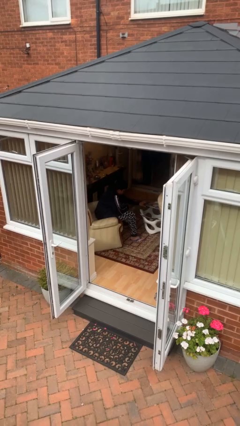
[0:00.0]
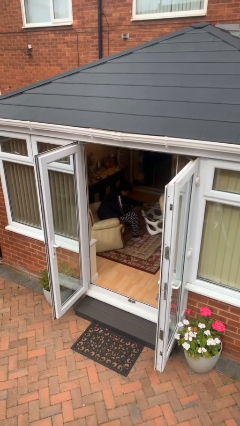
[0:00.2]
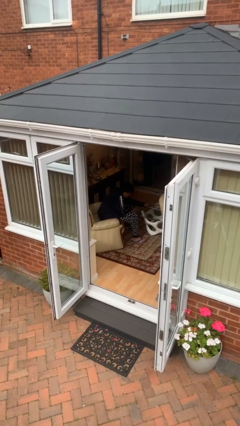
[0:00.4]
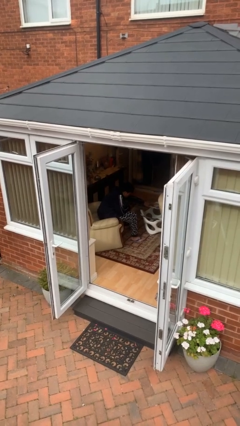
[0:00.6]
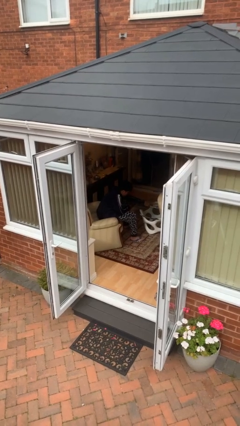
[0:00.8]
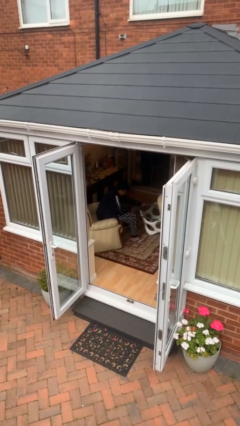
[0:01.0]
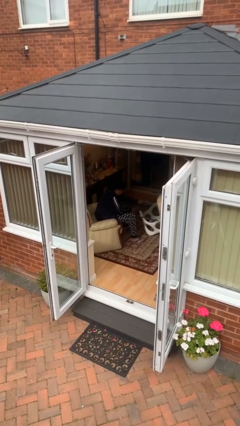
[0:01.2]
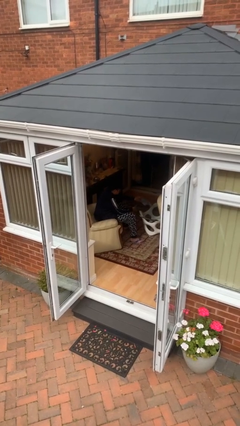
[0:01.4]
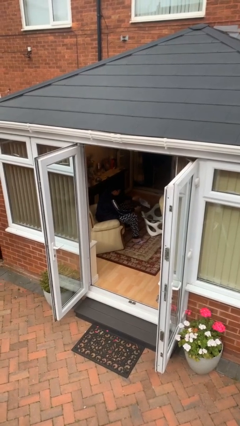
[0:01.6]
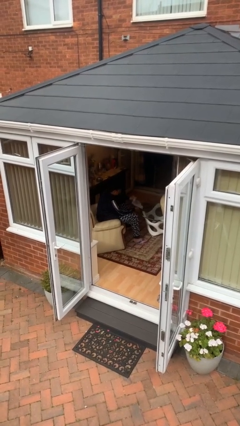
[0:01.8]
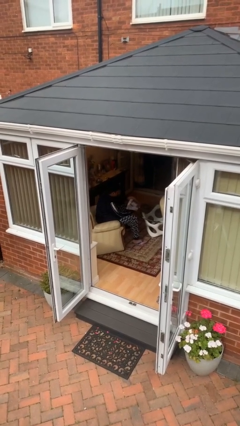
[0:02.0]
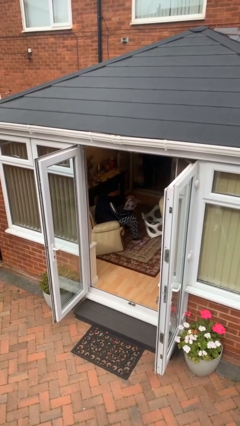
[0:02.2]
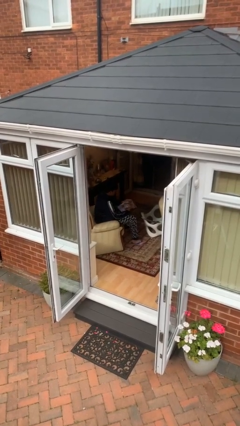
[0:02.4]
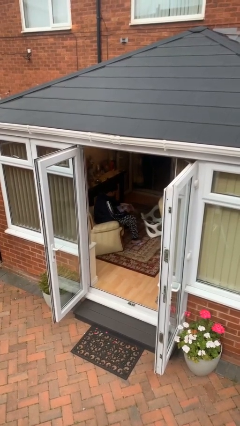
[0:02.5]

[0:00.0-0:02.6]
person picks up object from table

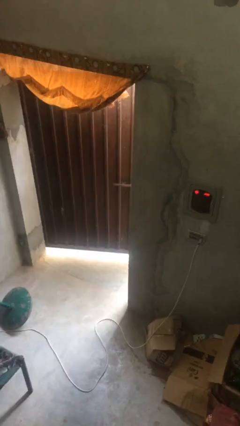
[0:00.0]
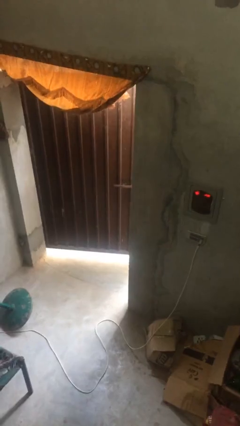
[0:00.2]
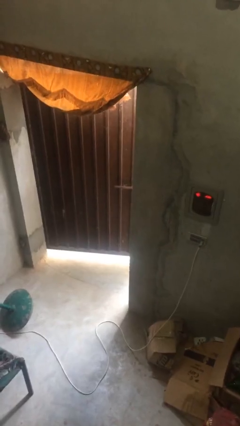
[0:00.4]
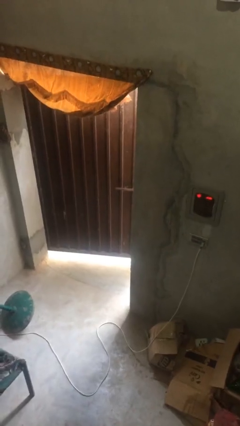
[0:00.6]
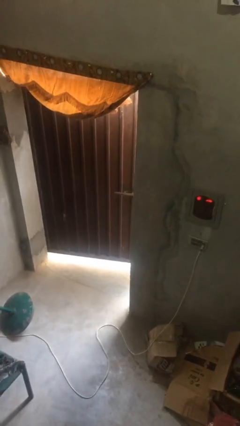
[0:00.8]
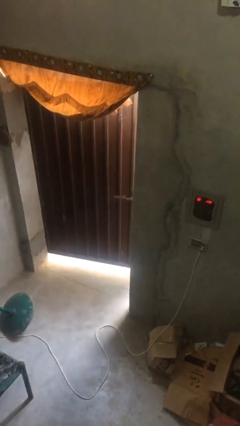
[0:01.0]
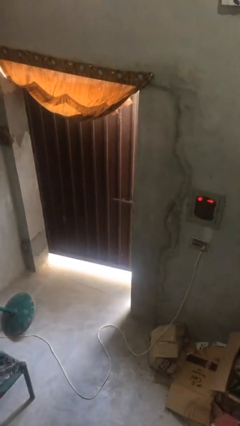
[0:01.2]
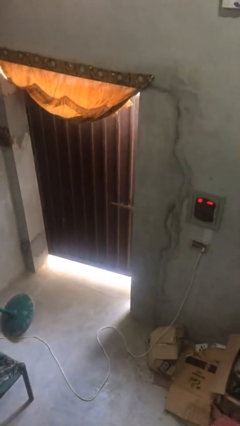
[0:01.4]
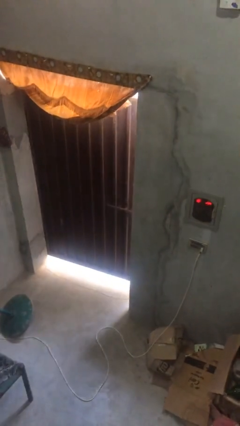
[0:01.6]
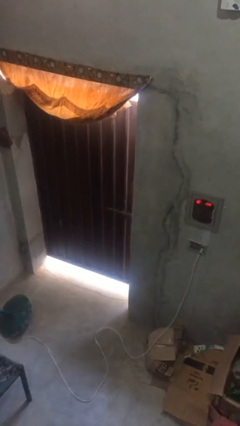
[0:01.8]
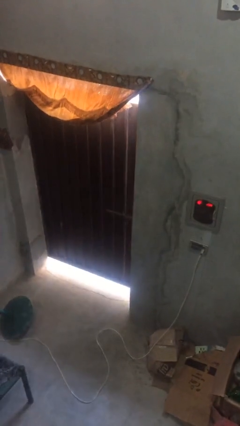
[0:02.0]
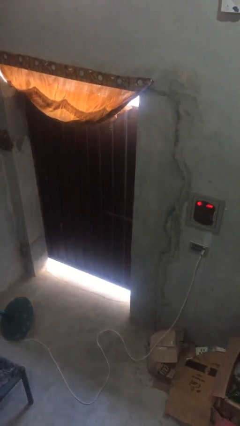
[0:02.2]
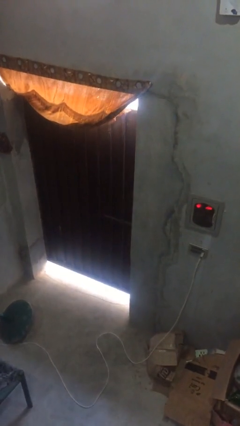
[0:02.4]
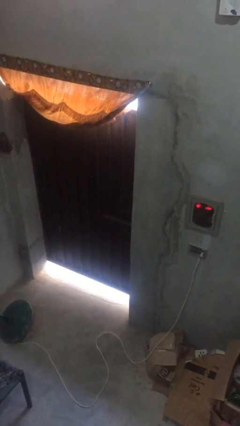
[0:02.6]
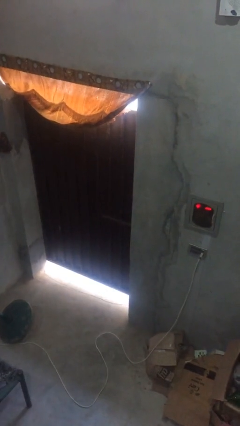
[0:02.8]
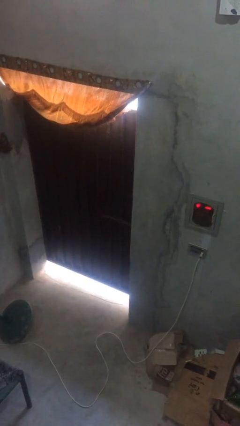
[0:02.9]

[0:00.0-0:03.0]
person closes facility door

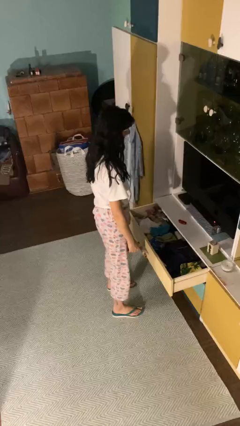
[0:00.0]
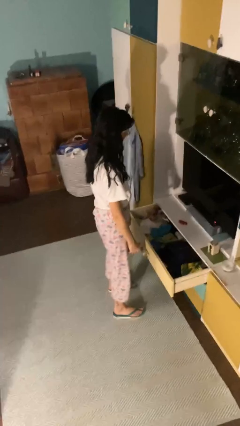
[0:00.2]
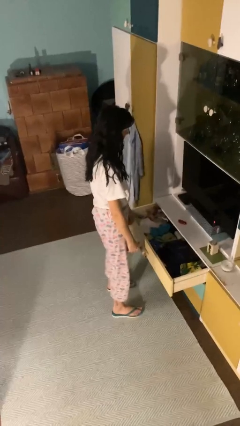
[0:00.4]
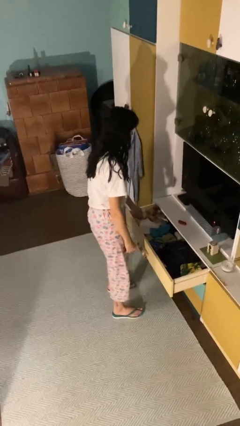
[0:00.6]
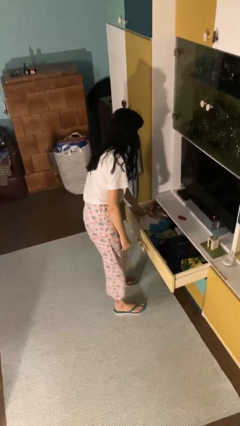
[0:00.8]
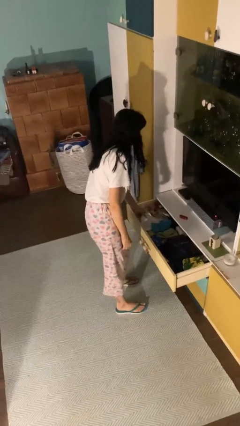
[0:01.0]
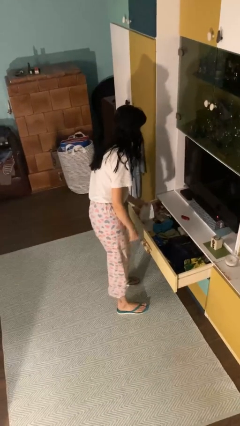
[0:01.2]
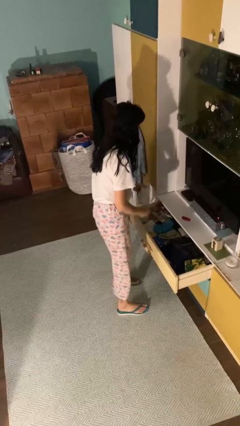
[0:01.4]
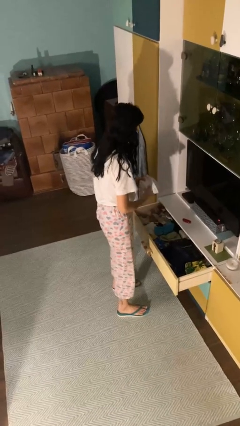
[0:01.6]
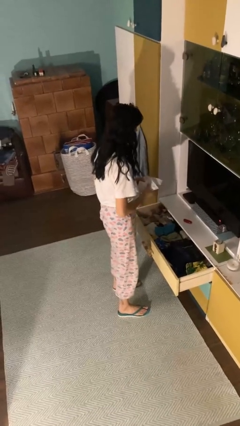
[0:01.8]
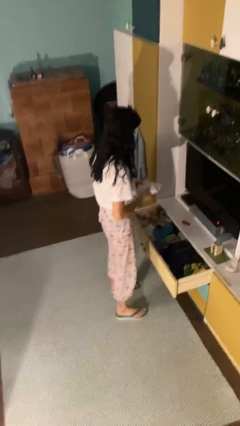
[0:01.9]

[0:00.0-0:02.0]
person takes clothes from dresser

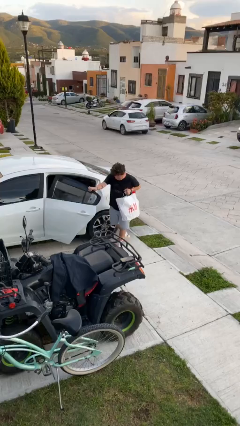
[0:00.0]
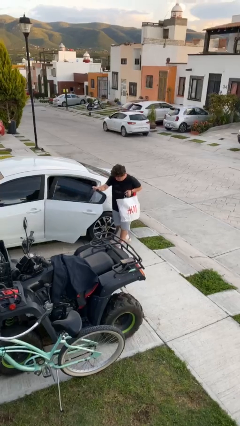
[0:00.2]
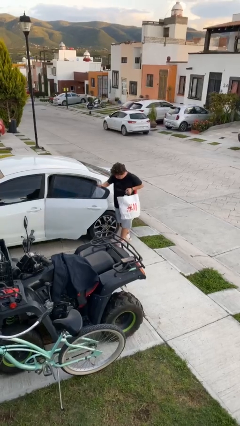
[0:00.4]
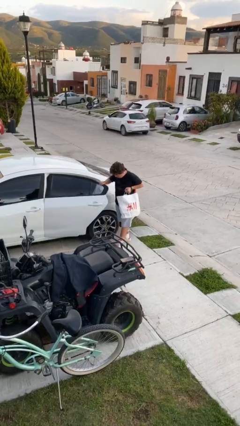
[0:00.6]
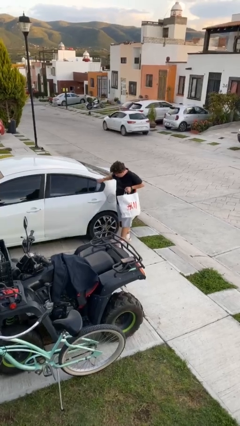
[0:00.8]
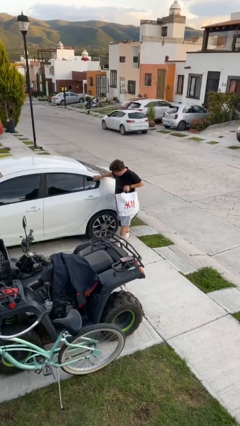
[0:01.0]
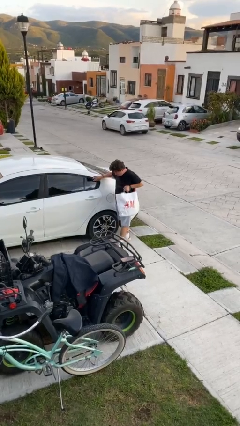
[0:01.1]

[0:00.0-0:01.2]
person closes car door

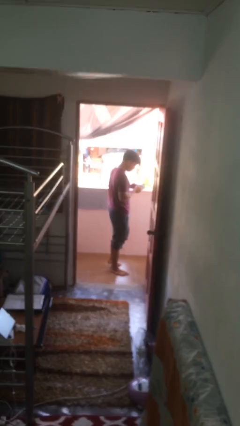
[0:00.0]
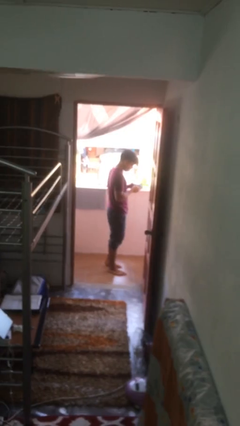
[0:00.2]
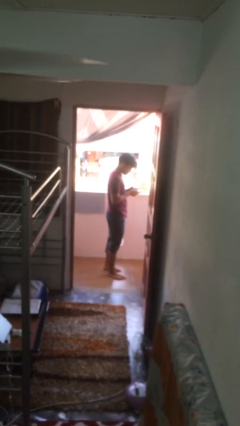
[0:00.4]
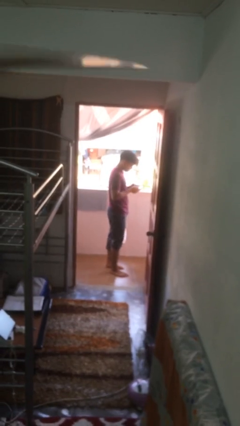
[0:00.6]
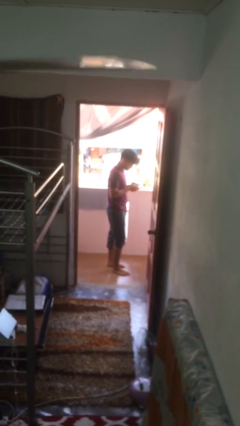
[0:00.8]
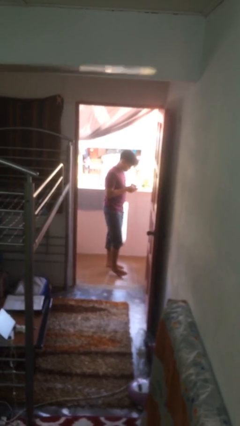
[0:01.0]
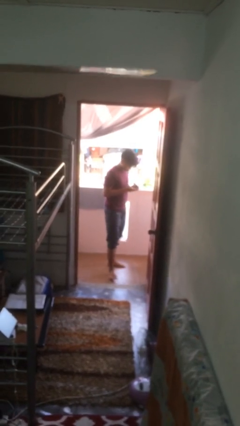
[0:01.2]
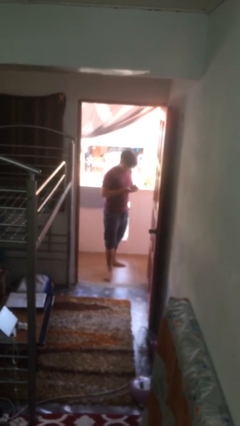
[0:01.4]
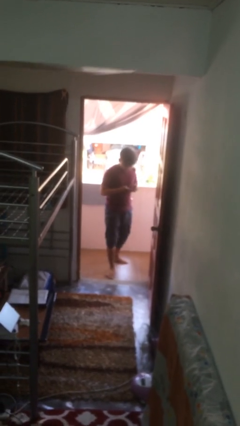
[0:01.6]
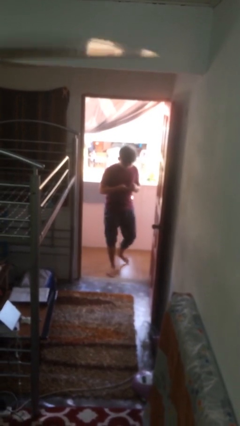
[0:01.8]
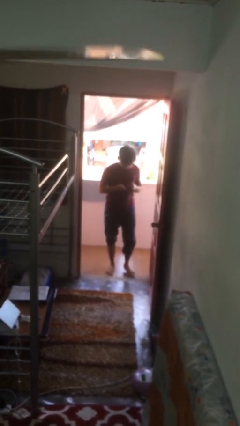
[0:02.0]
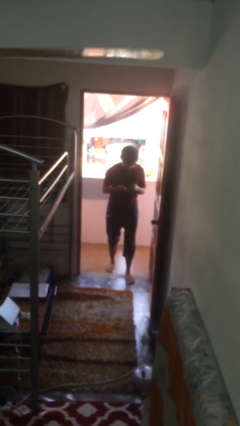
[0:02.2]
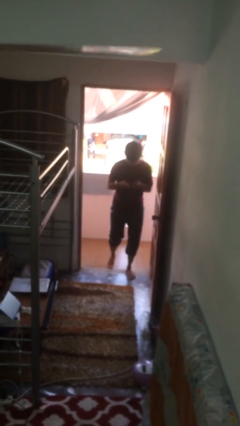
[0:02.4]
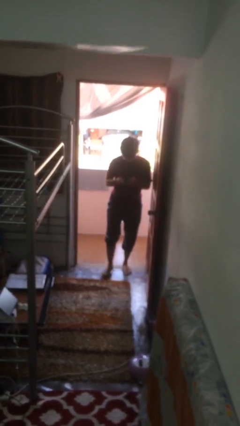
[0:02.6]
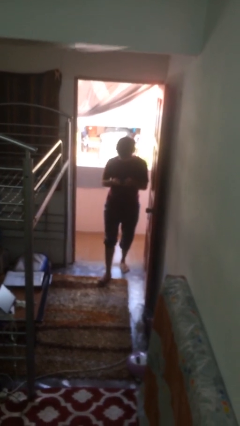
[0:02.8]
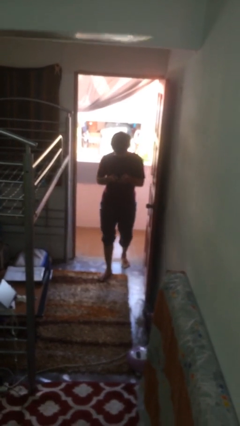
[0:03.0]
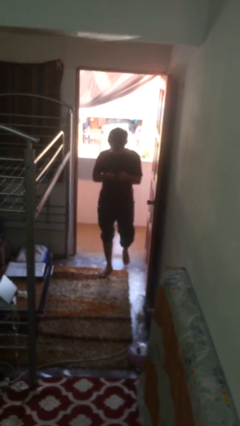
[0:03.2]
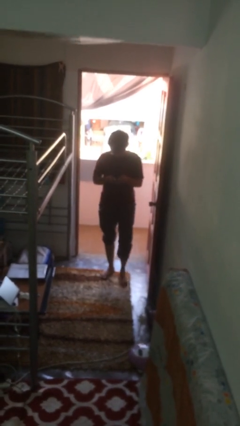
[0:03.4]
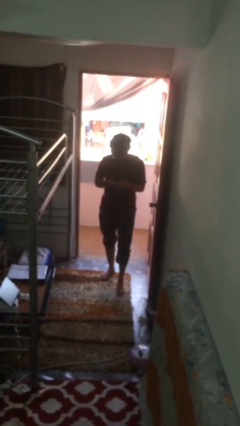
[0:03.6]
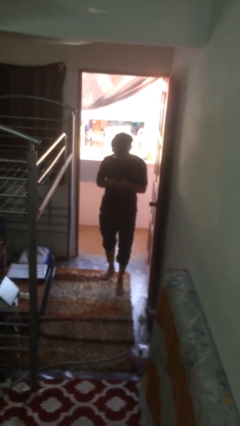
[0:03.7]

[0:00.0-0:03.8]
person enters scene through structure

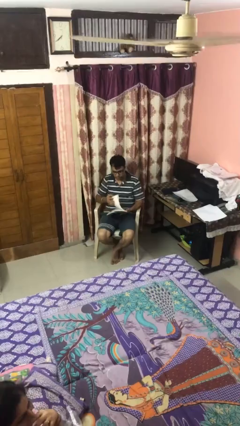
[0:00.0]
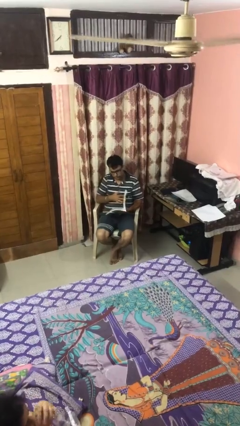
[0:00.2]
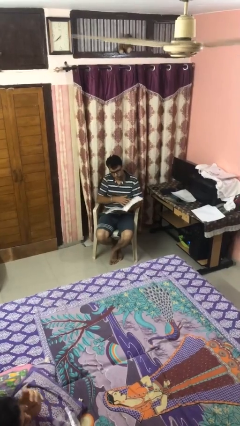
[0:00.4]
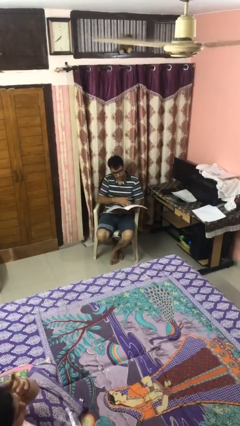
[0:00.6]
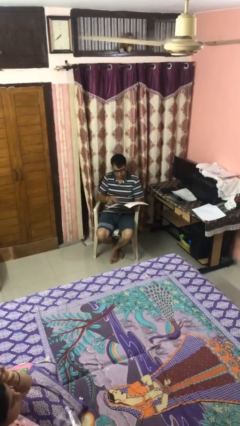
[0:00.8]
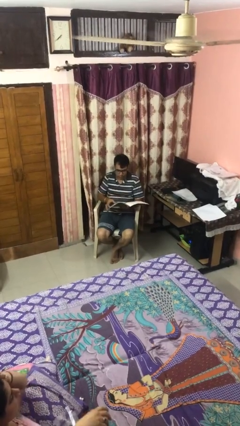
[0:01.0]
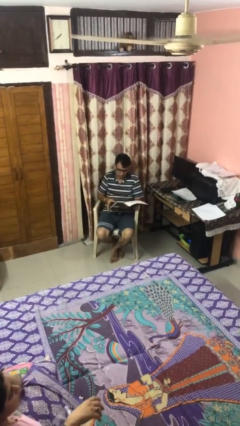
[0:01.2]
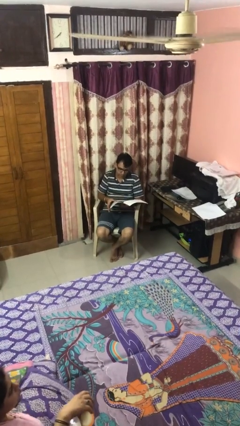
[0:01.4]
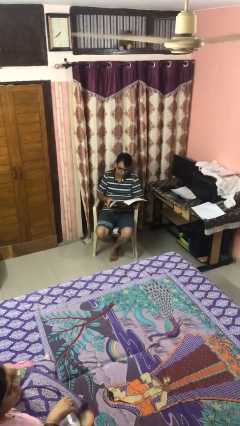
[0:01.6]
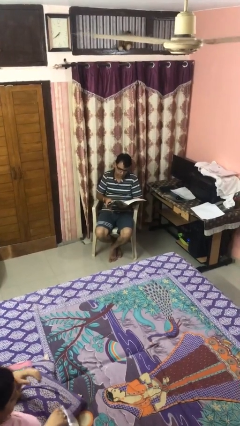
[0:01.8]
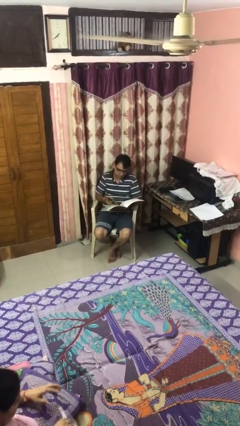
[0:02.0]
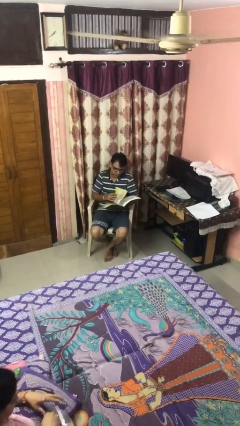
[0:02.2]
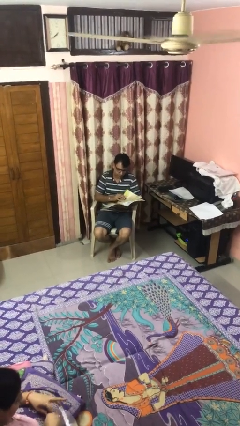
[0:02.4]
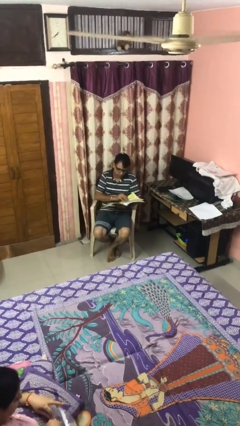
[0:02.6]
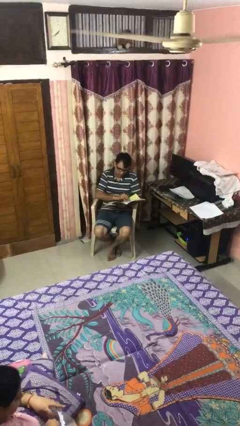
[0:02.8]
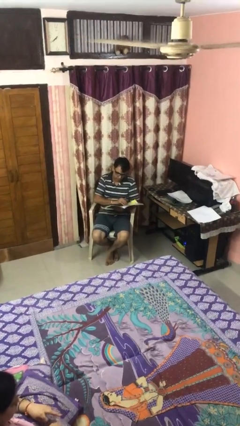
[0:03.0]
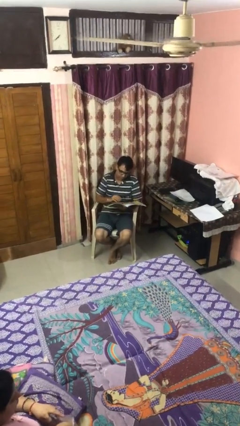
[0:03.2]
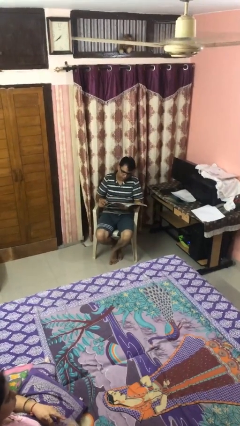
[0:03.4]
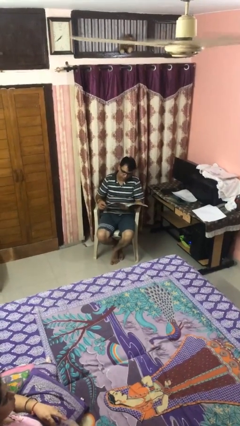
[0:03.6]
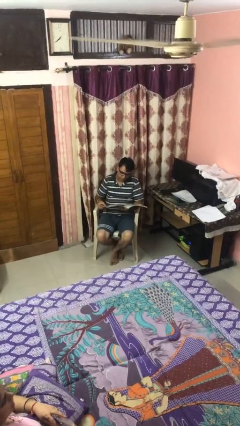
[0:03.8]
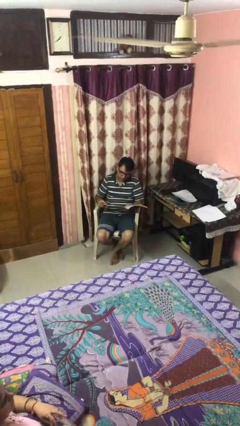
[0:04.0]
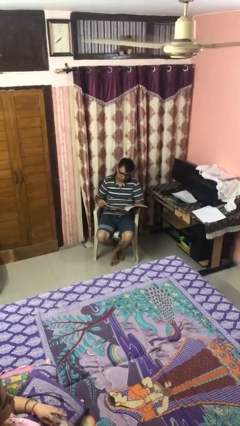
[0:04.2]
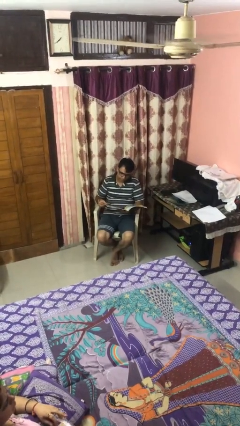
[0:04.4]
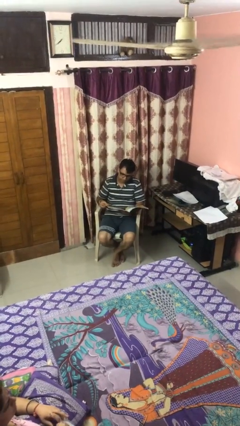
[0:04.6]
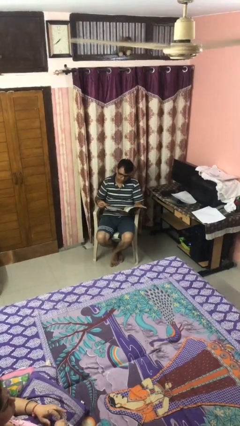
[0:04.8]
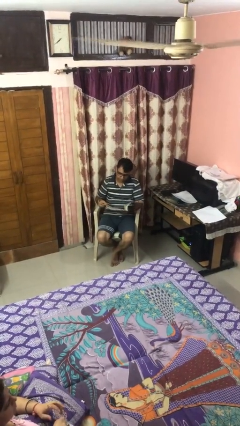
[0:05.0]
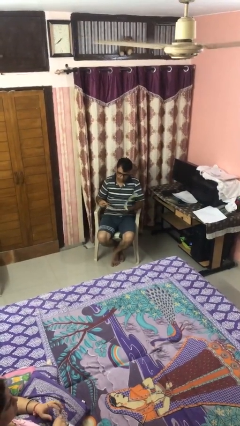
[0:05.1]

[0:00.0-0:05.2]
person reads magazine
